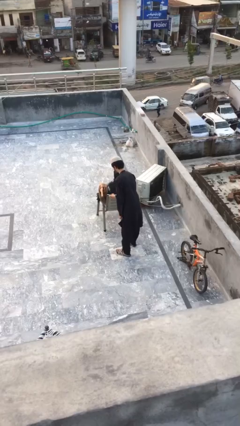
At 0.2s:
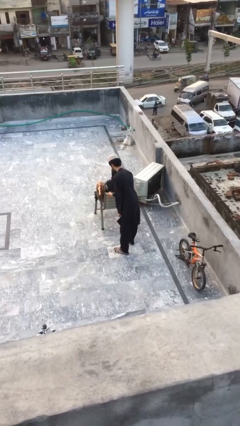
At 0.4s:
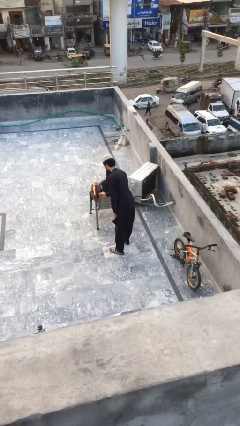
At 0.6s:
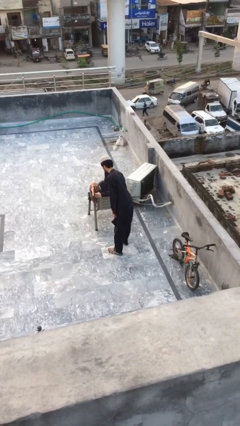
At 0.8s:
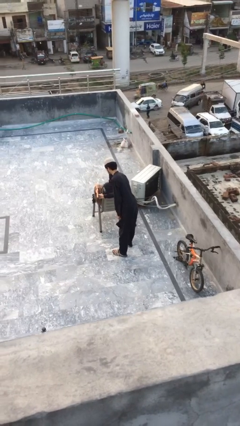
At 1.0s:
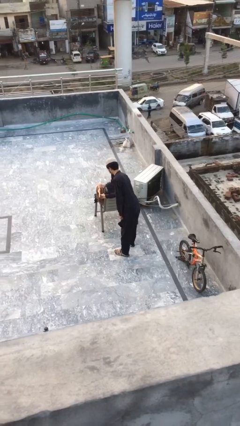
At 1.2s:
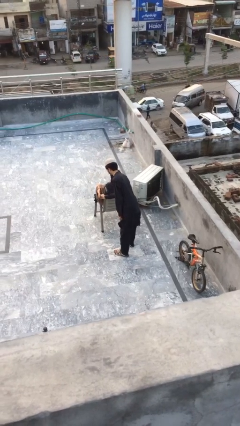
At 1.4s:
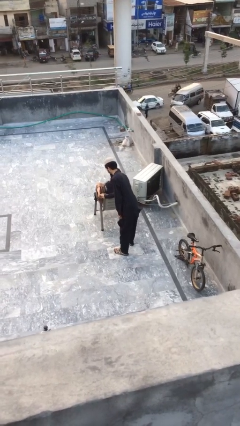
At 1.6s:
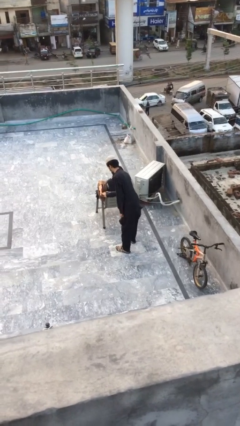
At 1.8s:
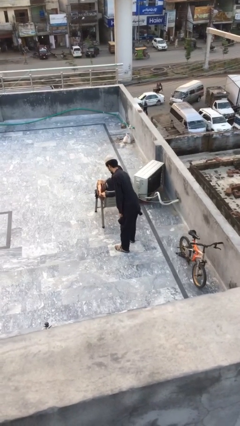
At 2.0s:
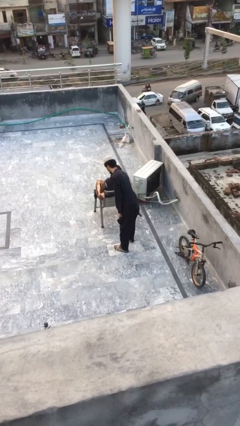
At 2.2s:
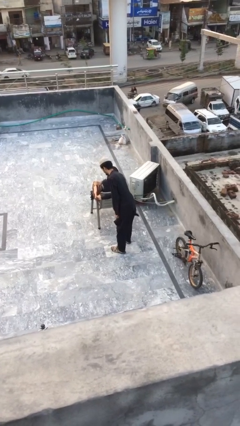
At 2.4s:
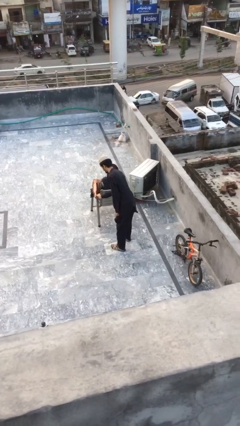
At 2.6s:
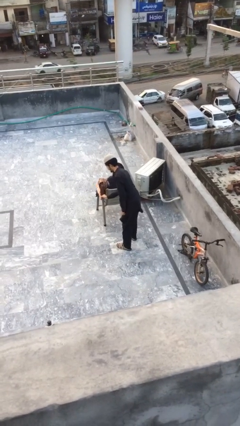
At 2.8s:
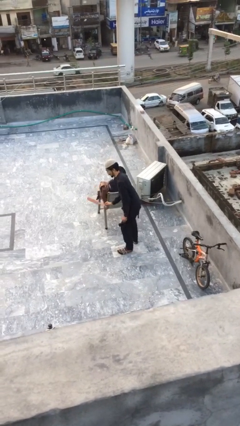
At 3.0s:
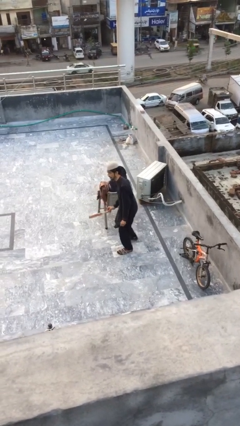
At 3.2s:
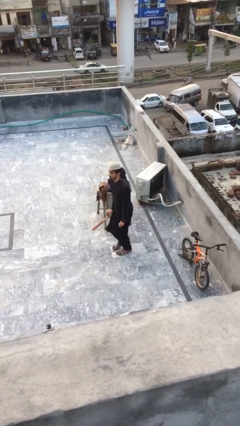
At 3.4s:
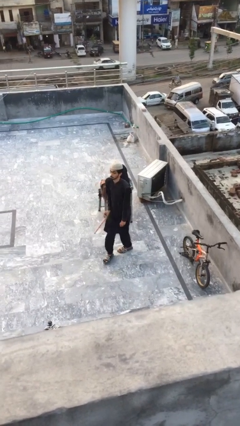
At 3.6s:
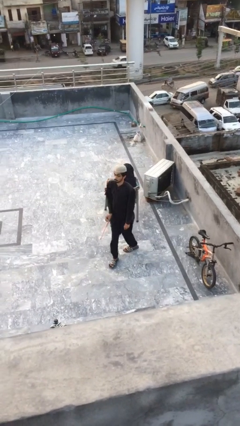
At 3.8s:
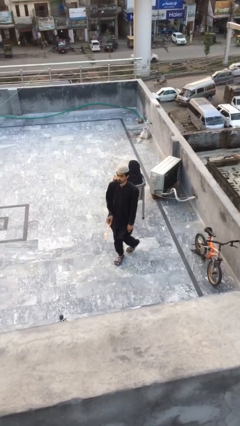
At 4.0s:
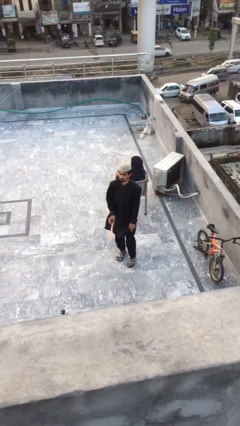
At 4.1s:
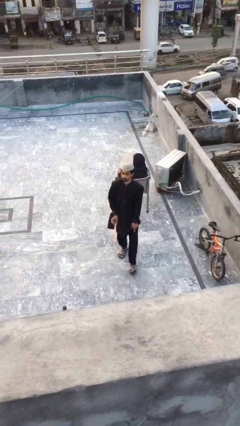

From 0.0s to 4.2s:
person steals object from person

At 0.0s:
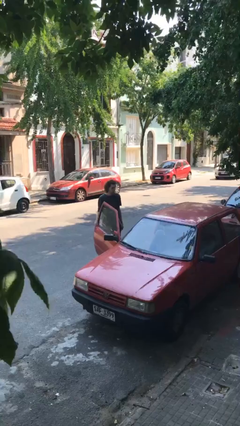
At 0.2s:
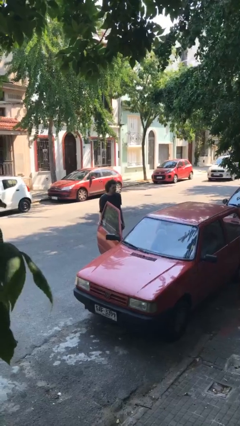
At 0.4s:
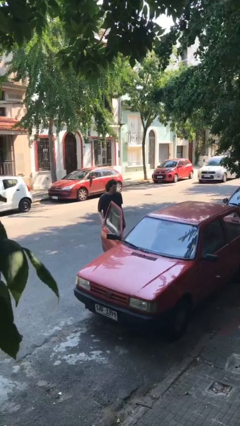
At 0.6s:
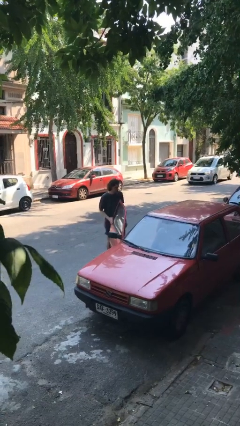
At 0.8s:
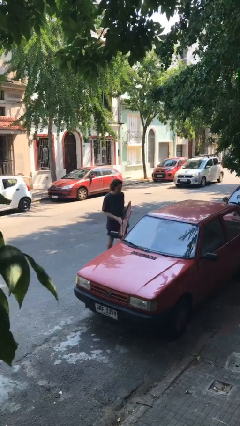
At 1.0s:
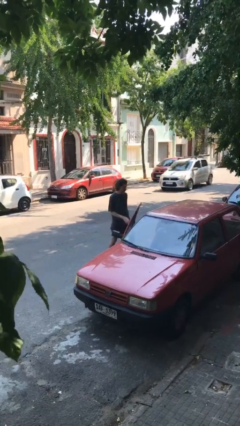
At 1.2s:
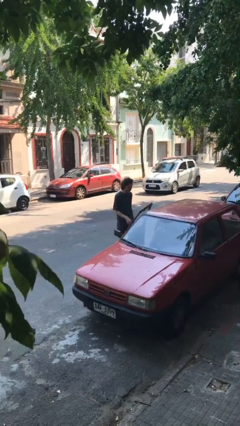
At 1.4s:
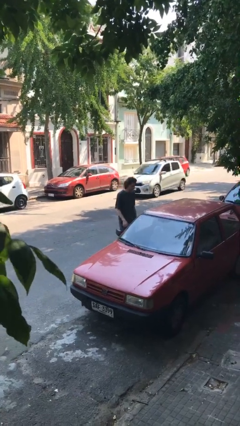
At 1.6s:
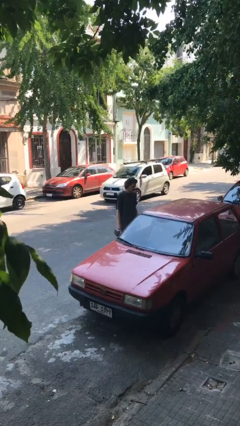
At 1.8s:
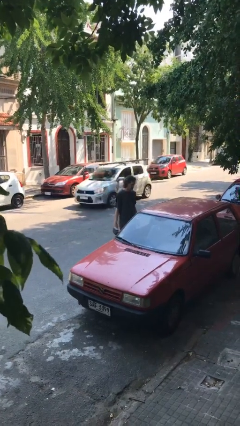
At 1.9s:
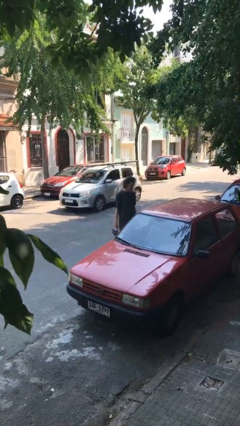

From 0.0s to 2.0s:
person closes car door

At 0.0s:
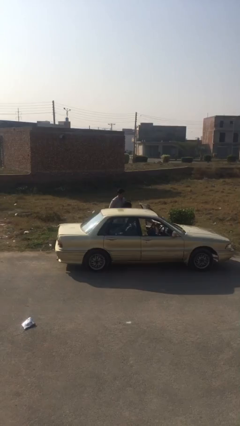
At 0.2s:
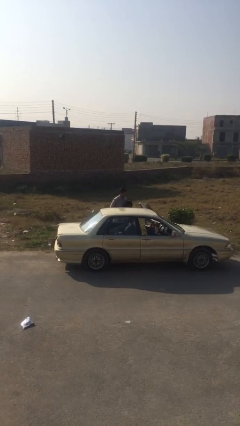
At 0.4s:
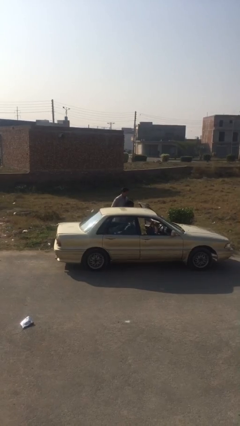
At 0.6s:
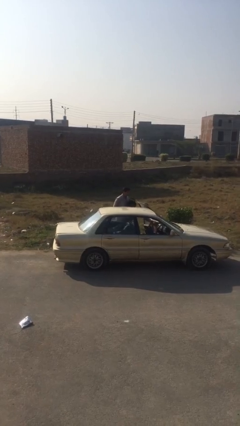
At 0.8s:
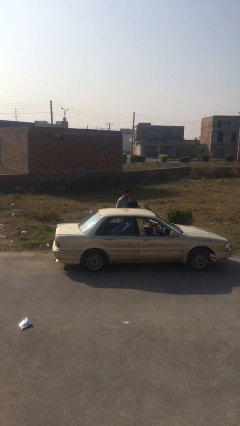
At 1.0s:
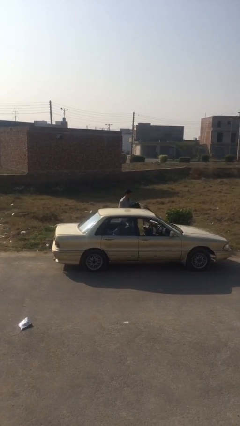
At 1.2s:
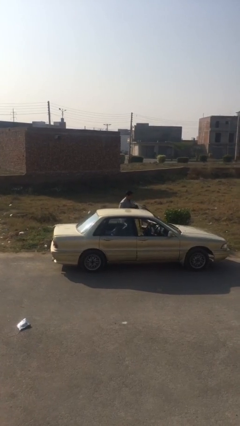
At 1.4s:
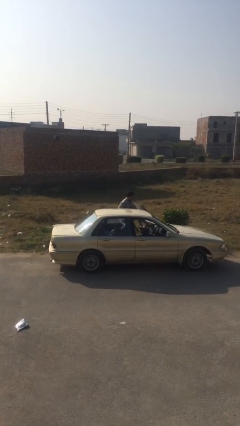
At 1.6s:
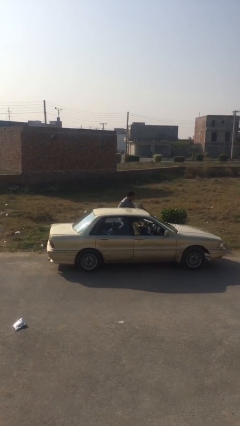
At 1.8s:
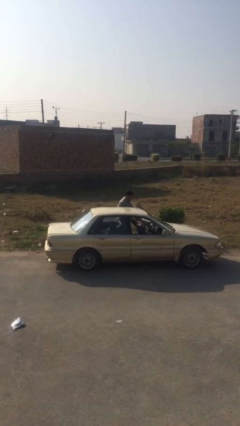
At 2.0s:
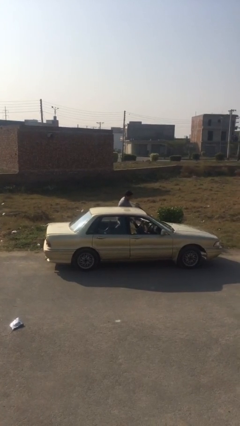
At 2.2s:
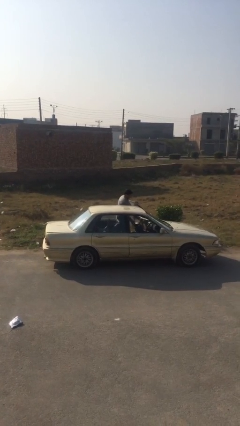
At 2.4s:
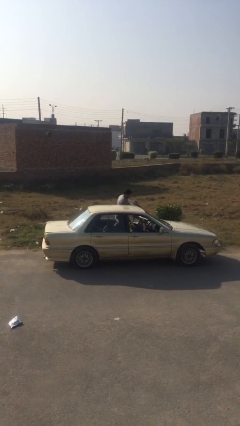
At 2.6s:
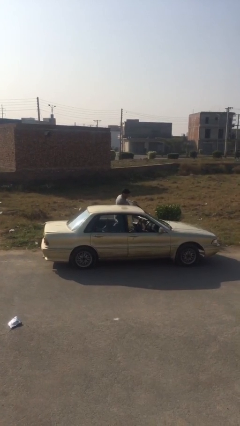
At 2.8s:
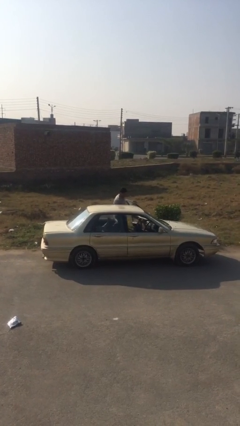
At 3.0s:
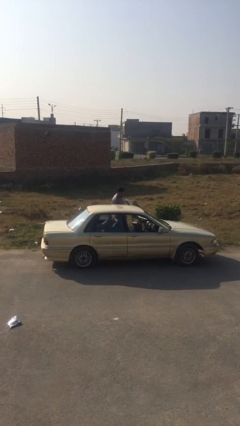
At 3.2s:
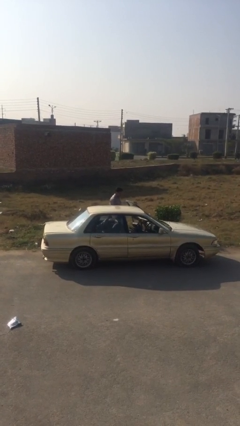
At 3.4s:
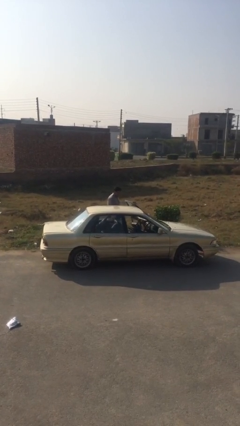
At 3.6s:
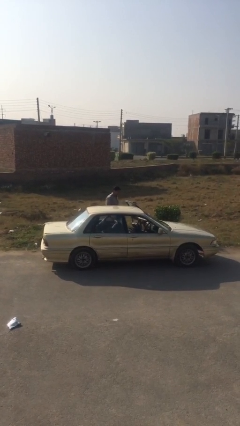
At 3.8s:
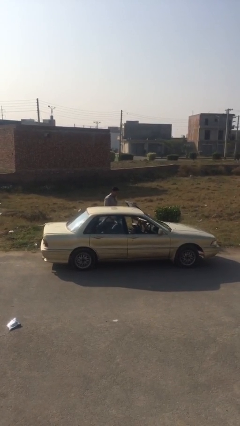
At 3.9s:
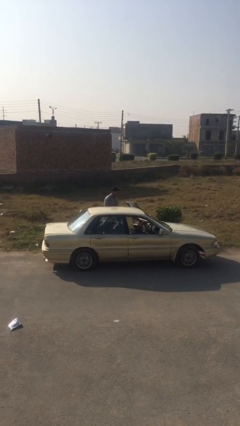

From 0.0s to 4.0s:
person loads car

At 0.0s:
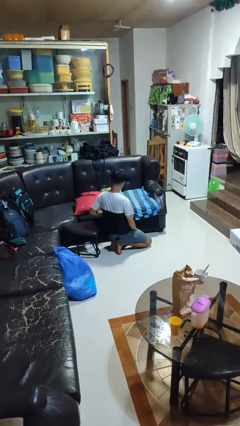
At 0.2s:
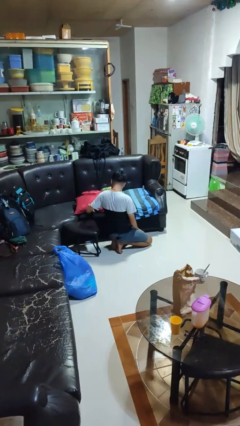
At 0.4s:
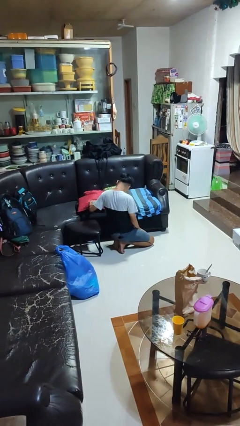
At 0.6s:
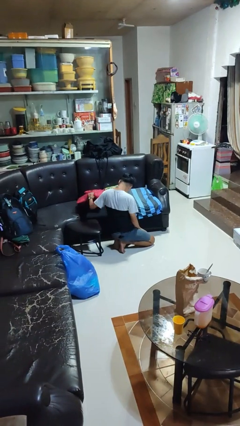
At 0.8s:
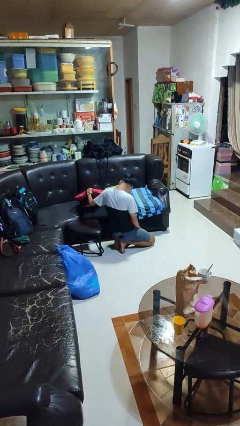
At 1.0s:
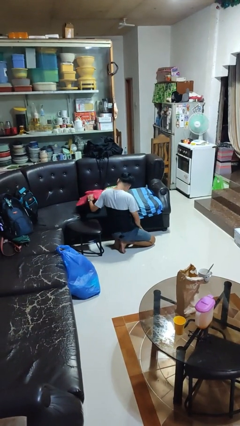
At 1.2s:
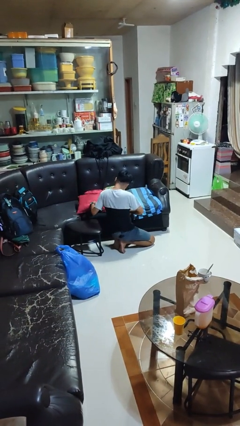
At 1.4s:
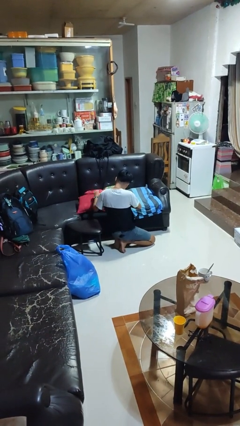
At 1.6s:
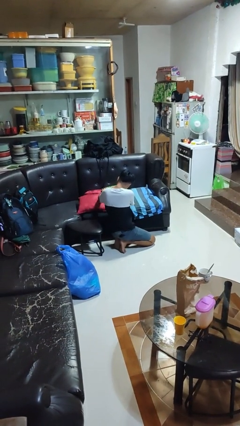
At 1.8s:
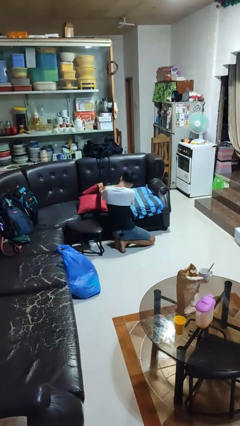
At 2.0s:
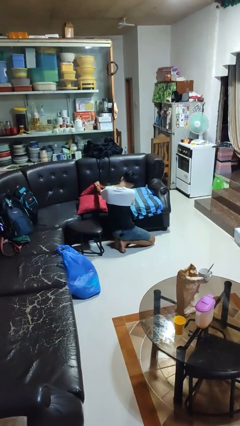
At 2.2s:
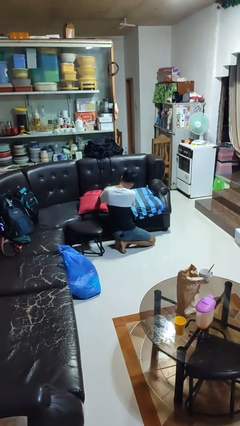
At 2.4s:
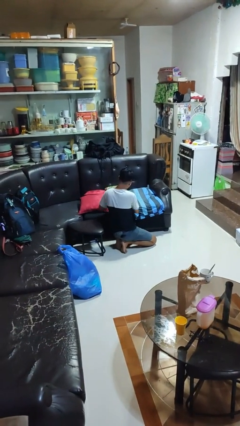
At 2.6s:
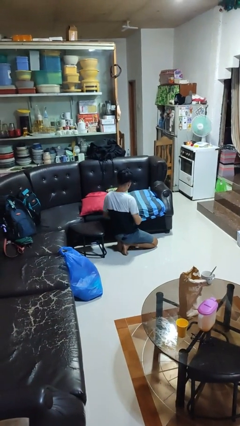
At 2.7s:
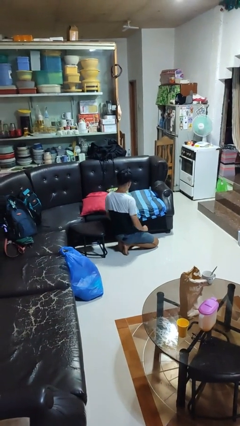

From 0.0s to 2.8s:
person searches in couch

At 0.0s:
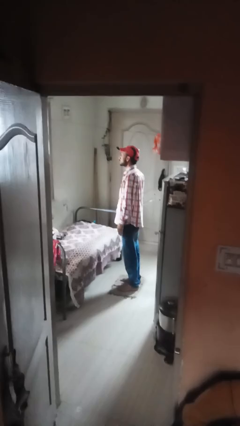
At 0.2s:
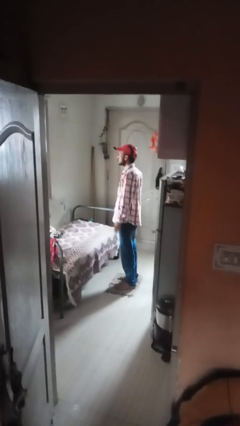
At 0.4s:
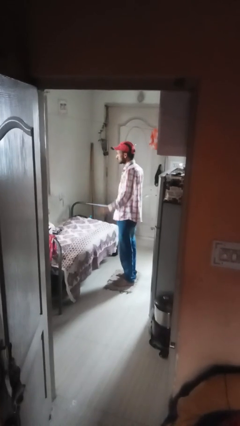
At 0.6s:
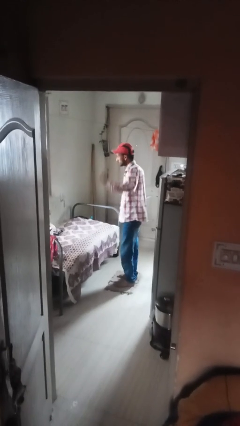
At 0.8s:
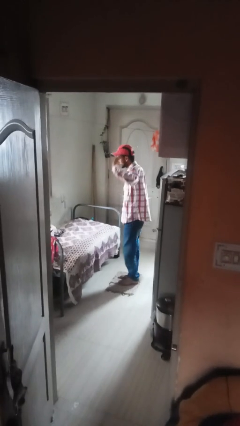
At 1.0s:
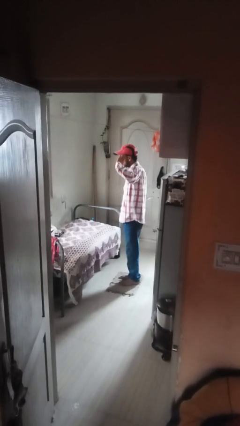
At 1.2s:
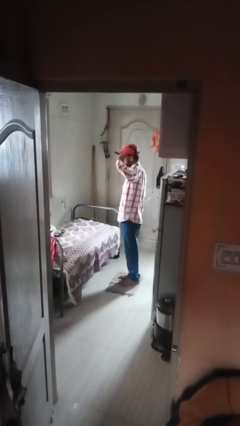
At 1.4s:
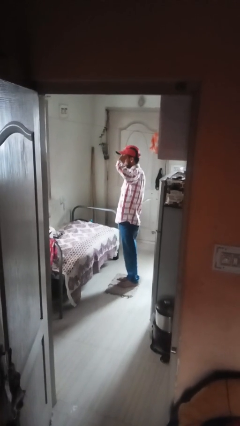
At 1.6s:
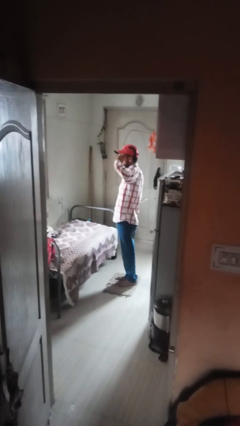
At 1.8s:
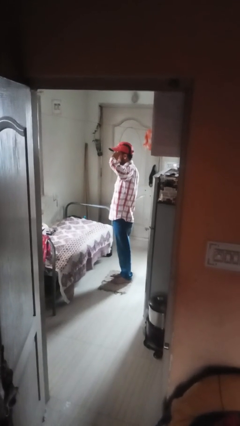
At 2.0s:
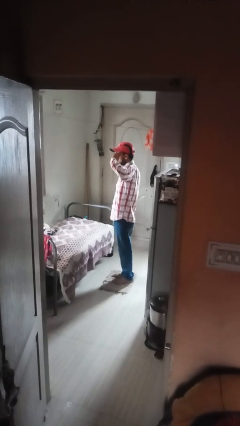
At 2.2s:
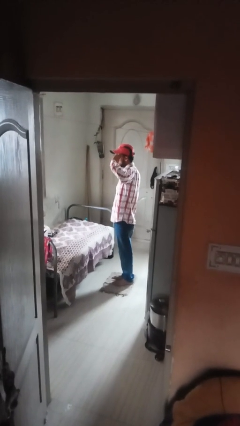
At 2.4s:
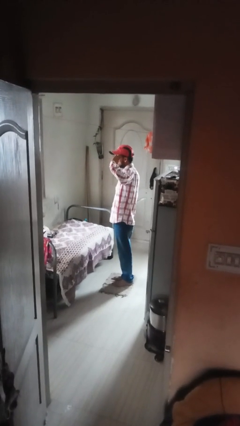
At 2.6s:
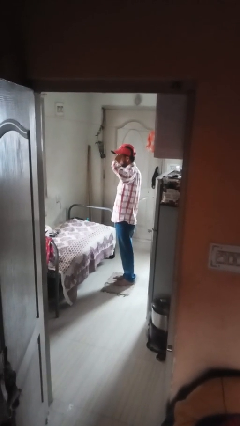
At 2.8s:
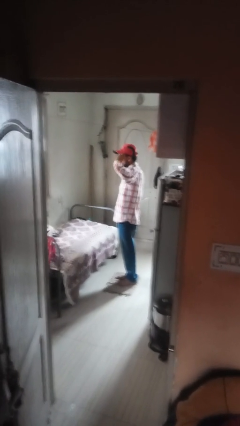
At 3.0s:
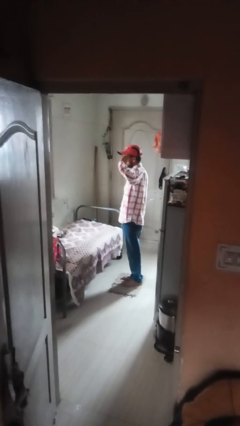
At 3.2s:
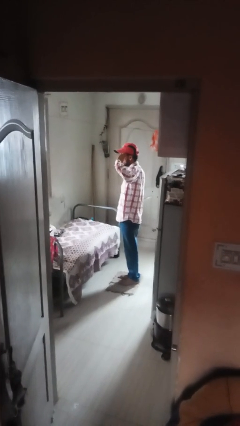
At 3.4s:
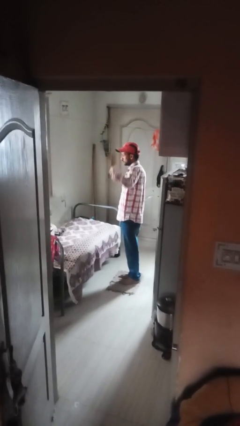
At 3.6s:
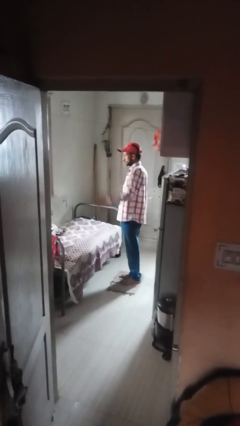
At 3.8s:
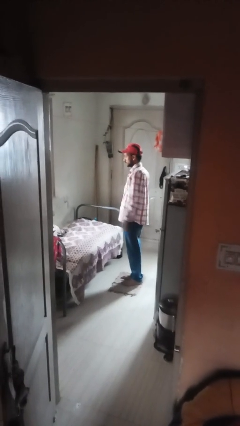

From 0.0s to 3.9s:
person salutes

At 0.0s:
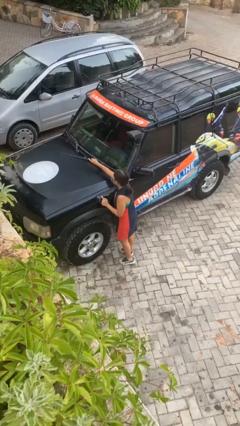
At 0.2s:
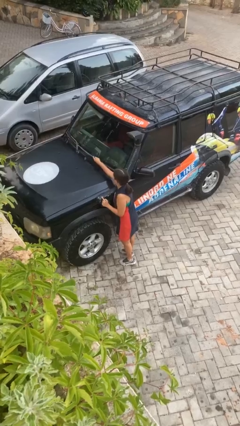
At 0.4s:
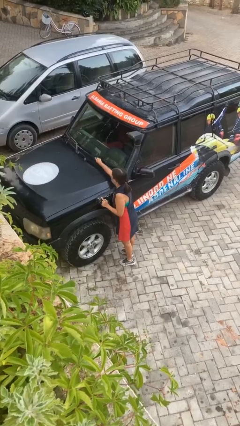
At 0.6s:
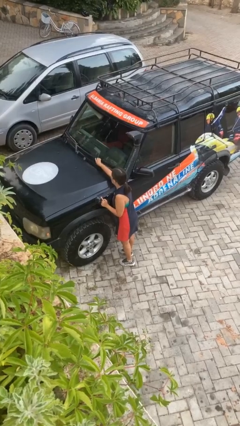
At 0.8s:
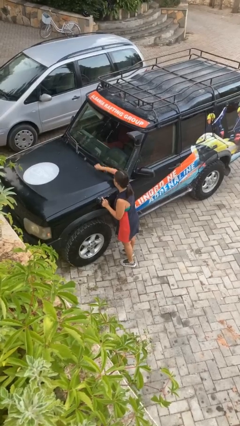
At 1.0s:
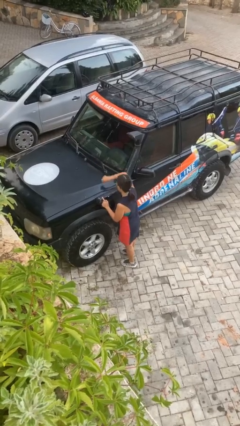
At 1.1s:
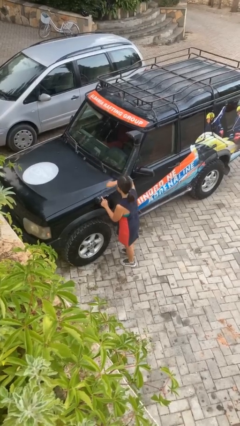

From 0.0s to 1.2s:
person flips down car wipers
